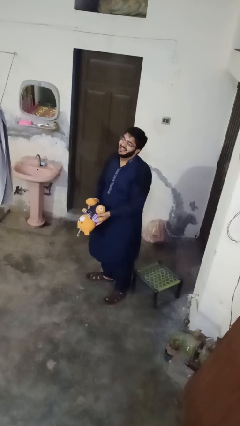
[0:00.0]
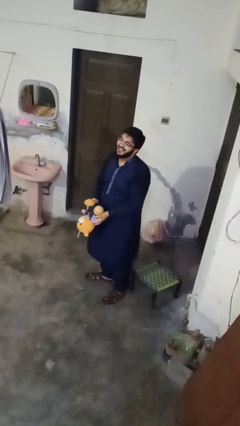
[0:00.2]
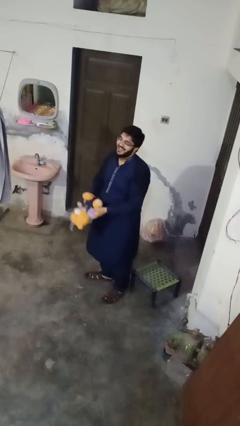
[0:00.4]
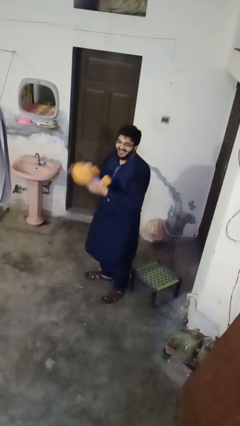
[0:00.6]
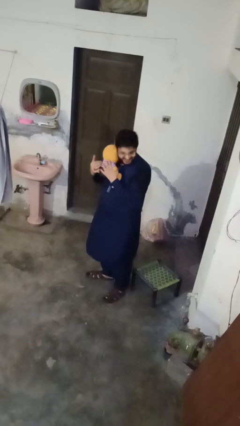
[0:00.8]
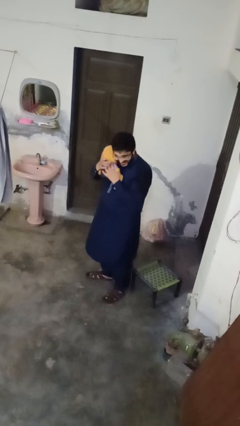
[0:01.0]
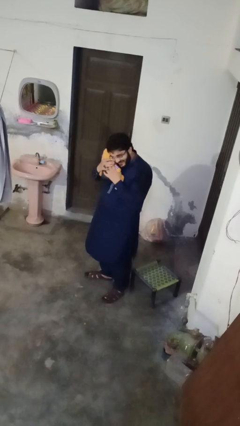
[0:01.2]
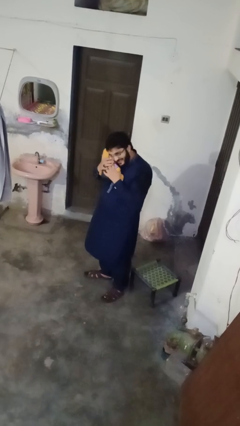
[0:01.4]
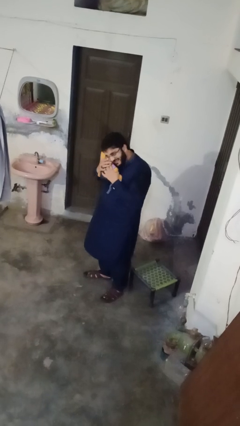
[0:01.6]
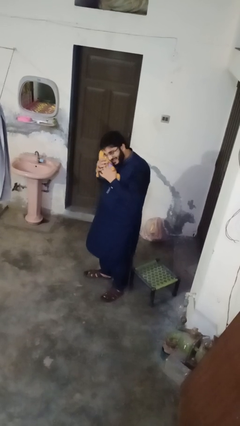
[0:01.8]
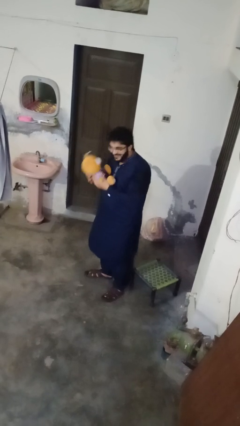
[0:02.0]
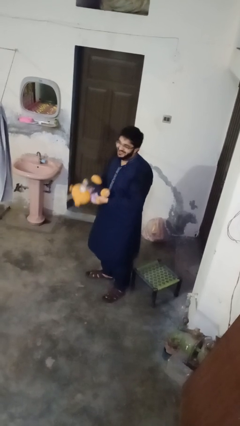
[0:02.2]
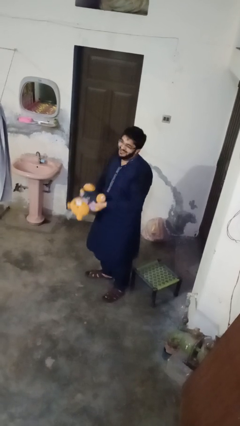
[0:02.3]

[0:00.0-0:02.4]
person hugs stuffed animal

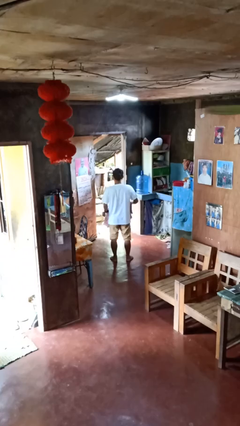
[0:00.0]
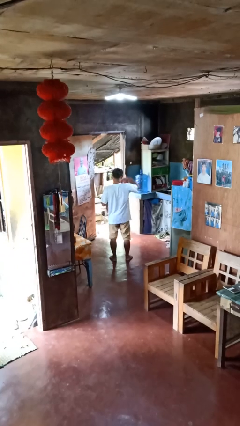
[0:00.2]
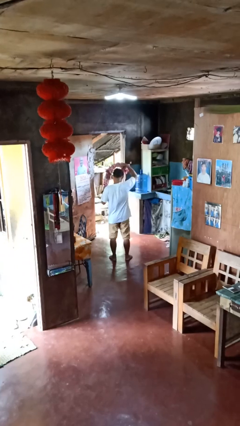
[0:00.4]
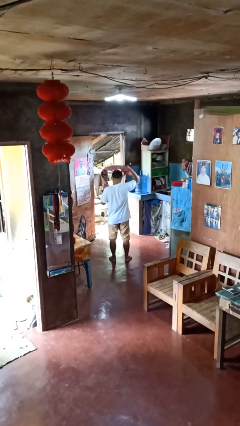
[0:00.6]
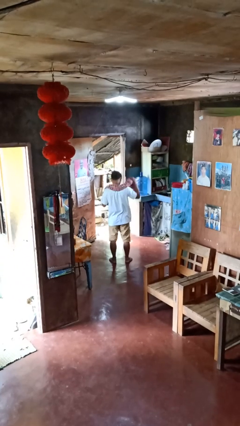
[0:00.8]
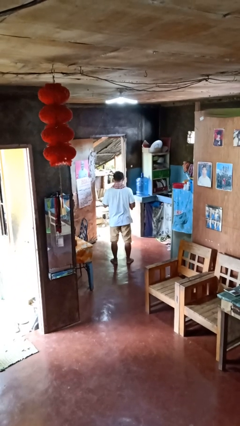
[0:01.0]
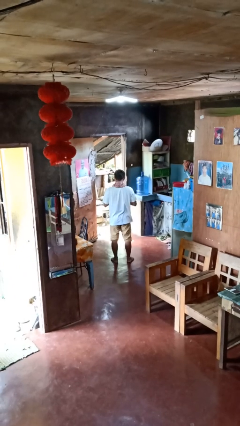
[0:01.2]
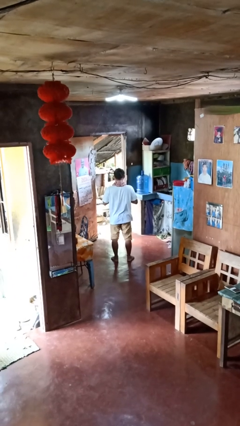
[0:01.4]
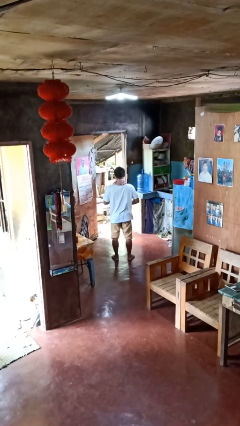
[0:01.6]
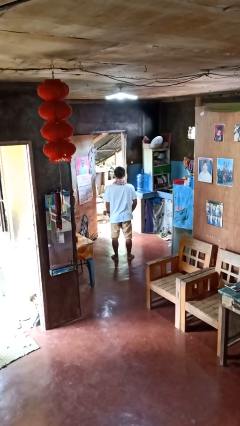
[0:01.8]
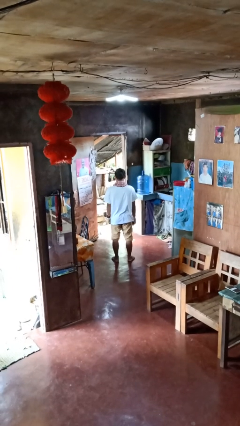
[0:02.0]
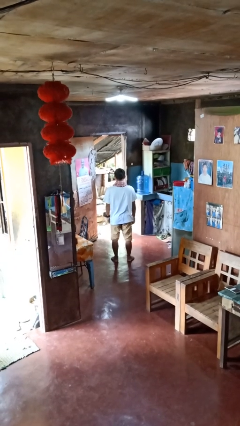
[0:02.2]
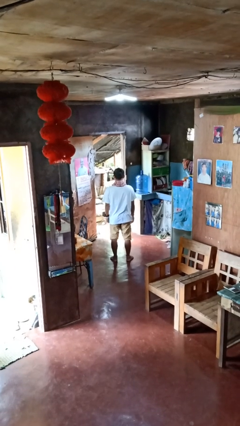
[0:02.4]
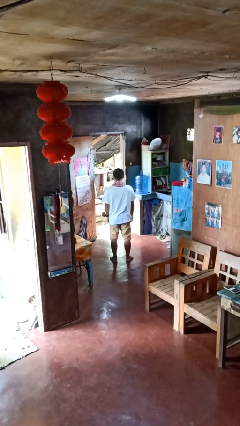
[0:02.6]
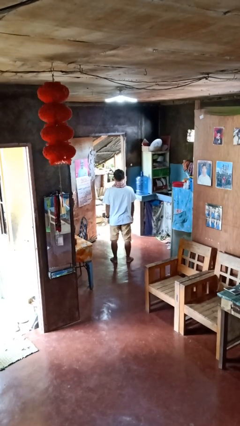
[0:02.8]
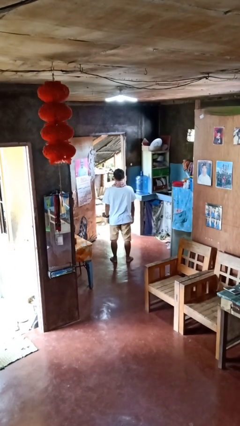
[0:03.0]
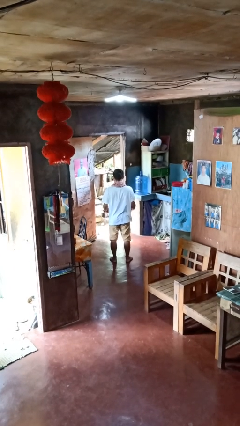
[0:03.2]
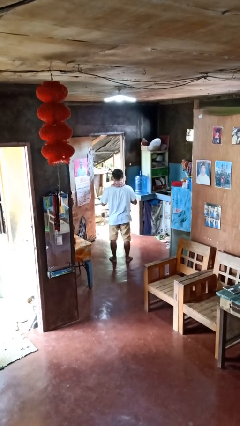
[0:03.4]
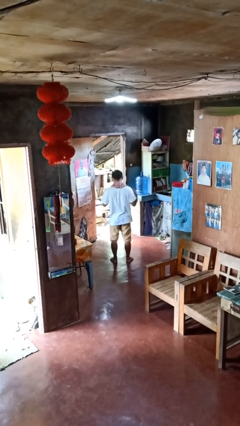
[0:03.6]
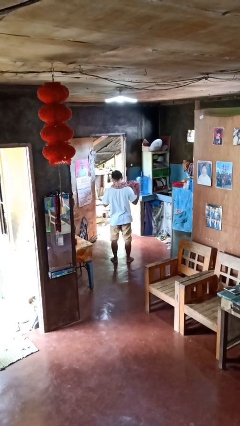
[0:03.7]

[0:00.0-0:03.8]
person puts on scarf

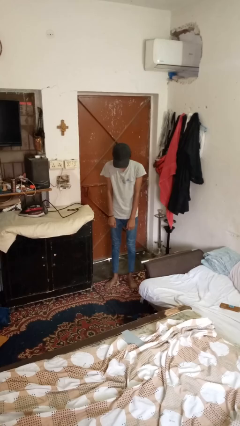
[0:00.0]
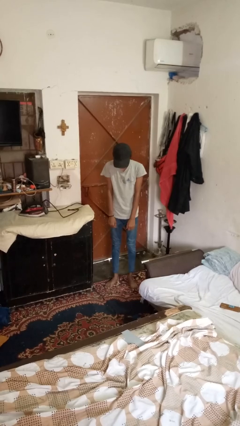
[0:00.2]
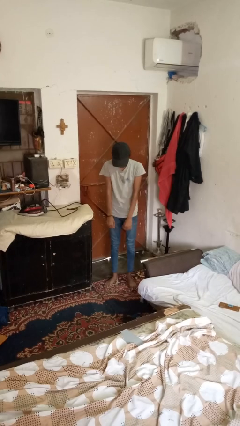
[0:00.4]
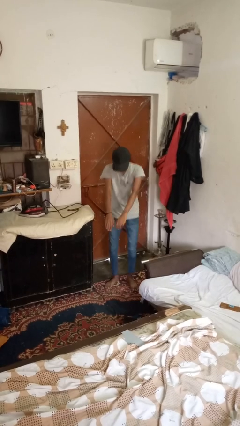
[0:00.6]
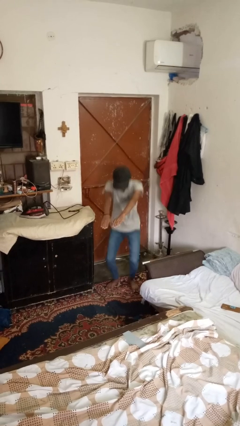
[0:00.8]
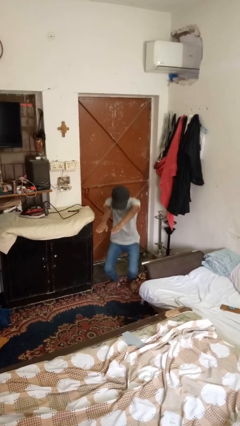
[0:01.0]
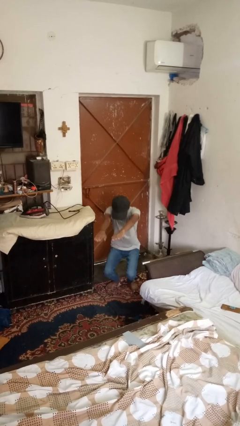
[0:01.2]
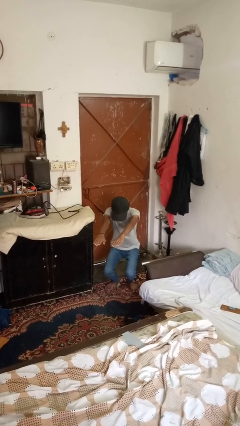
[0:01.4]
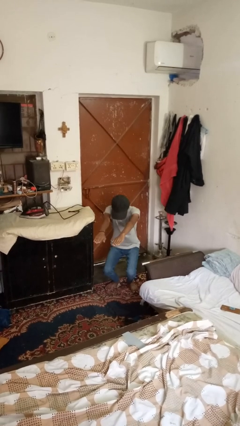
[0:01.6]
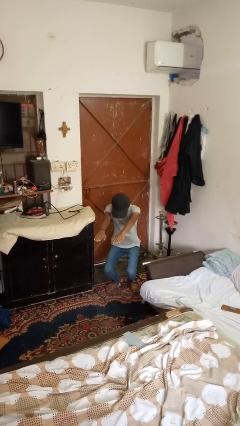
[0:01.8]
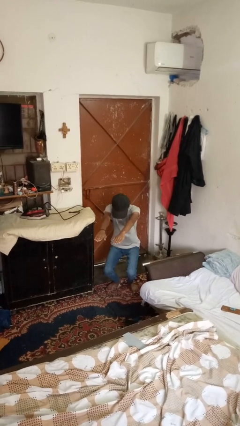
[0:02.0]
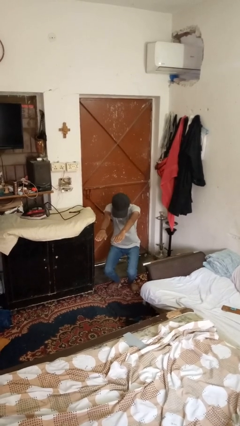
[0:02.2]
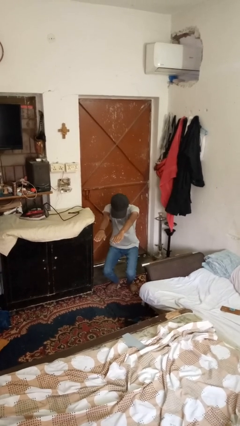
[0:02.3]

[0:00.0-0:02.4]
person squats

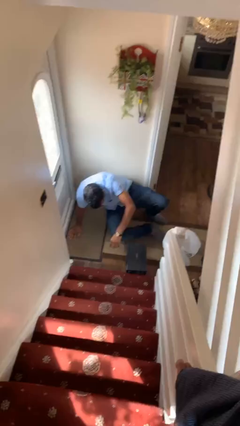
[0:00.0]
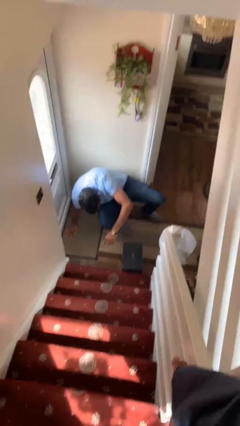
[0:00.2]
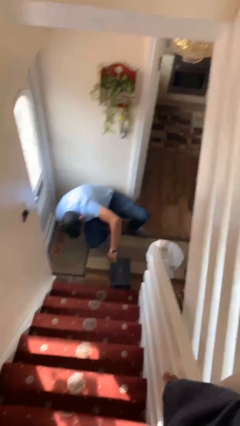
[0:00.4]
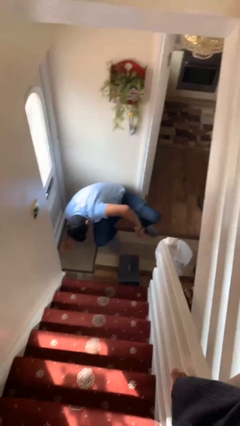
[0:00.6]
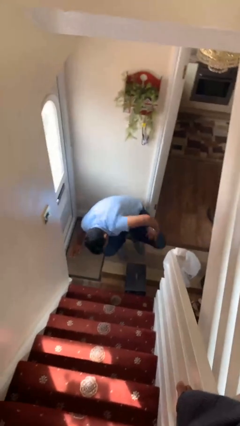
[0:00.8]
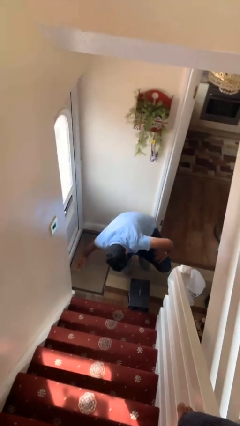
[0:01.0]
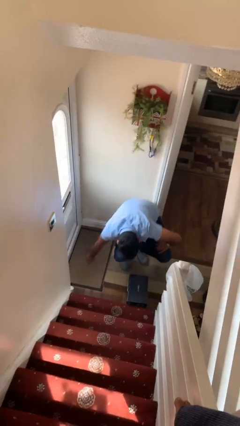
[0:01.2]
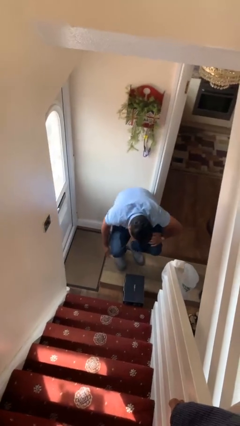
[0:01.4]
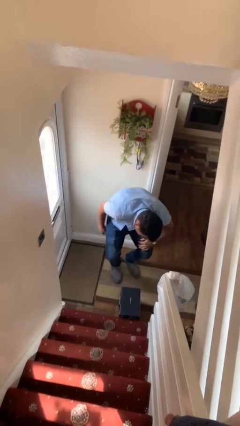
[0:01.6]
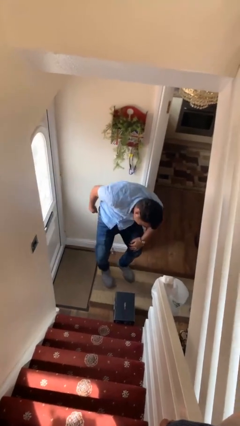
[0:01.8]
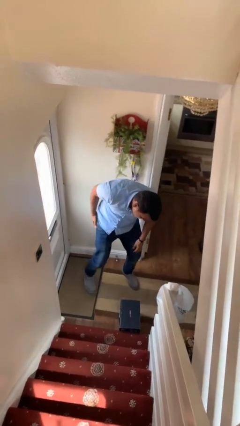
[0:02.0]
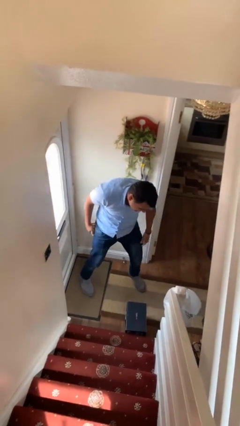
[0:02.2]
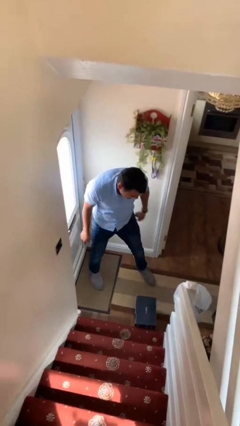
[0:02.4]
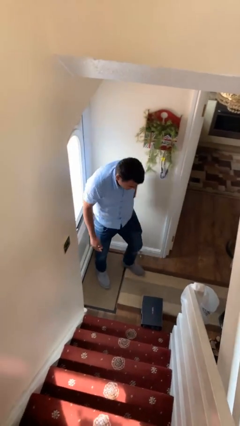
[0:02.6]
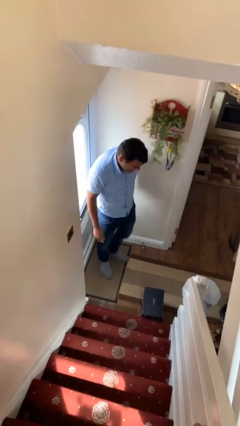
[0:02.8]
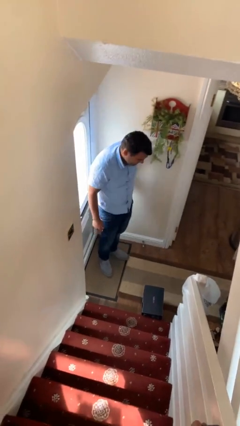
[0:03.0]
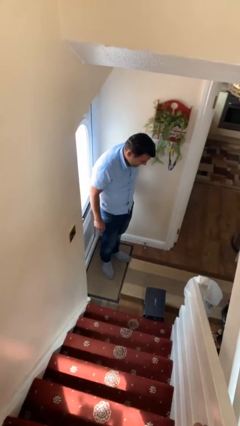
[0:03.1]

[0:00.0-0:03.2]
person stands up from floor

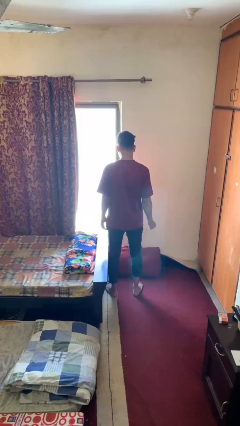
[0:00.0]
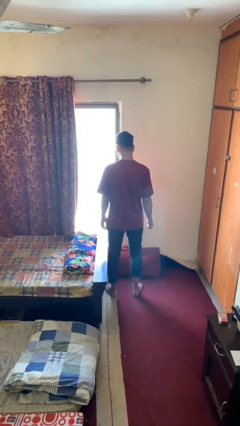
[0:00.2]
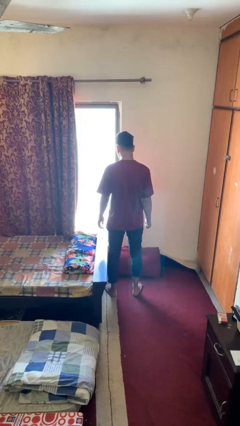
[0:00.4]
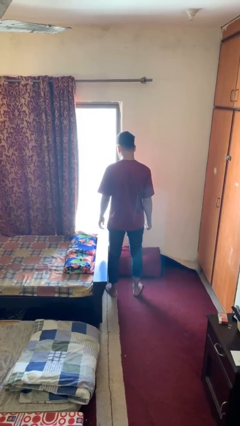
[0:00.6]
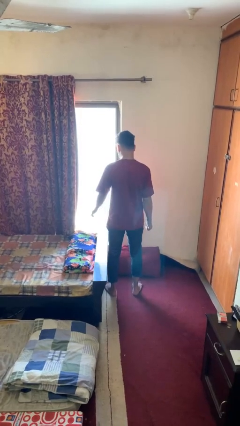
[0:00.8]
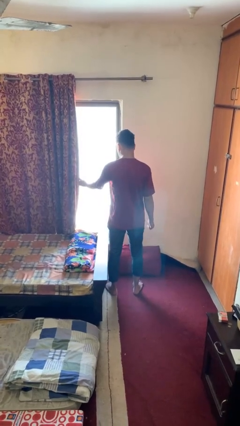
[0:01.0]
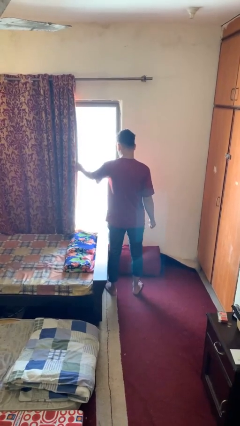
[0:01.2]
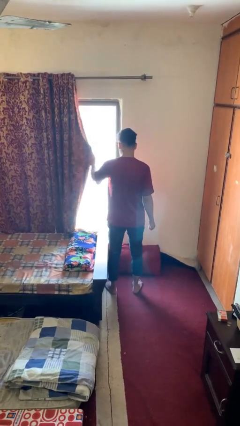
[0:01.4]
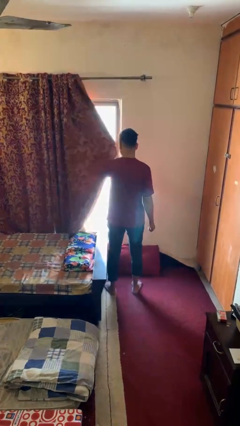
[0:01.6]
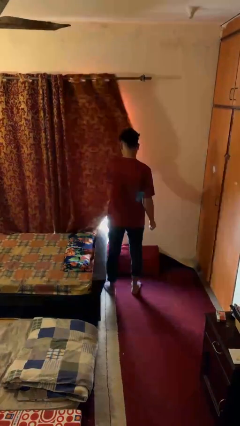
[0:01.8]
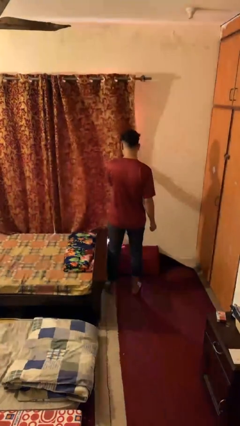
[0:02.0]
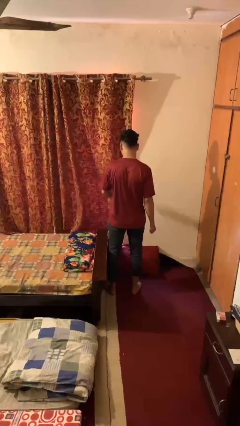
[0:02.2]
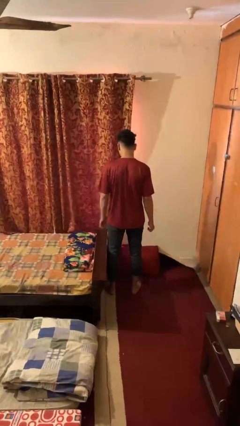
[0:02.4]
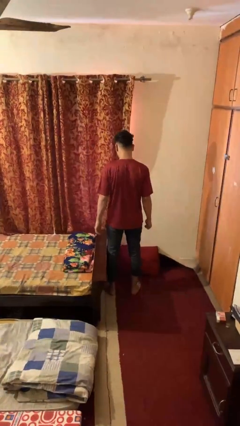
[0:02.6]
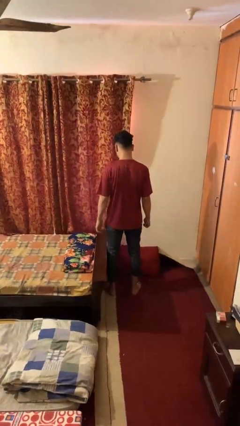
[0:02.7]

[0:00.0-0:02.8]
person closes curtains

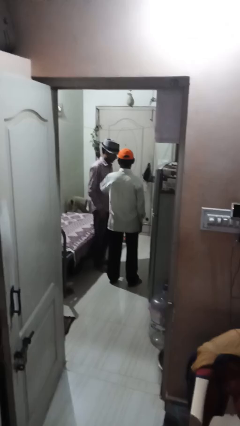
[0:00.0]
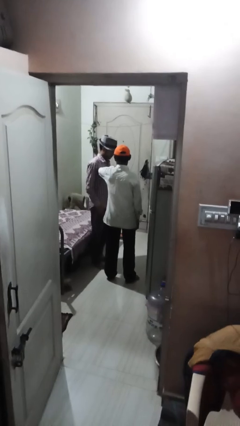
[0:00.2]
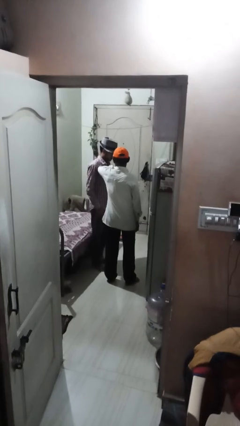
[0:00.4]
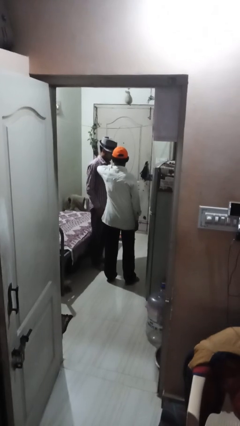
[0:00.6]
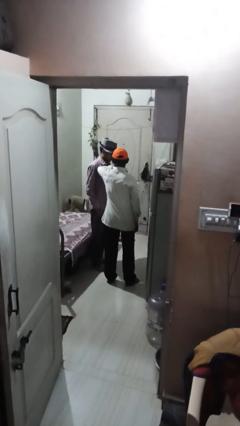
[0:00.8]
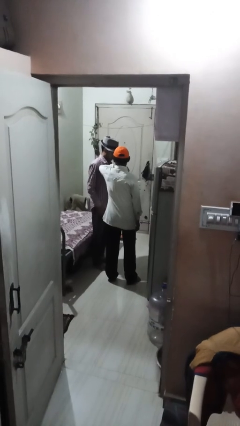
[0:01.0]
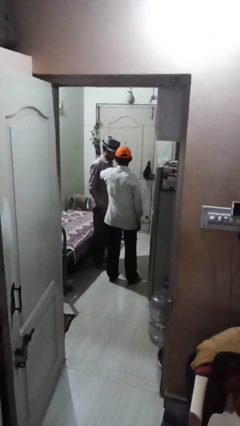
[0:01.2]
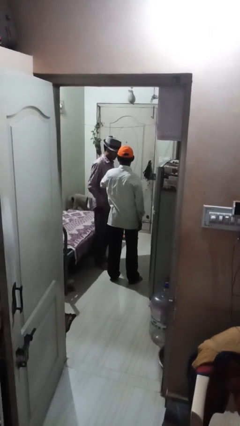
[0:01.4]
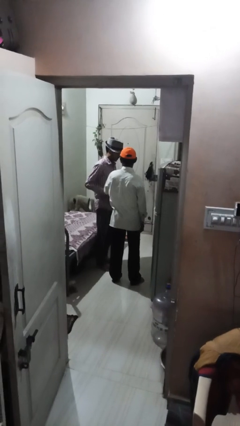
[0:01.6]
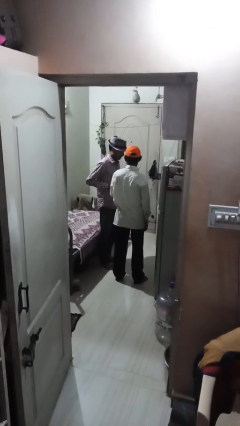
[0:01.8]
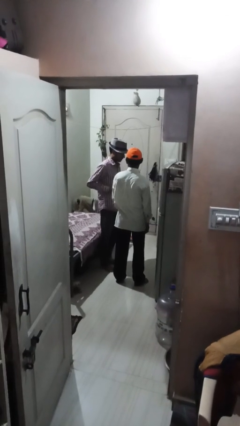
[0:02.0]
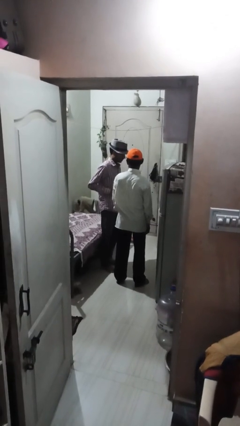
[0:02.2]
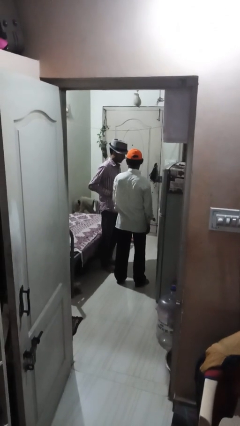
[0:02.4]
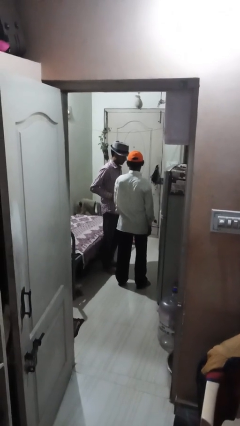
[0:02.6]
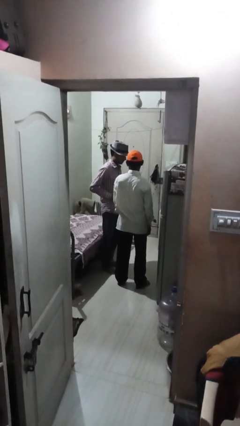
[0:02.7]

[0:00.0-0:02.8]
person nudges person with elbow

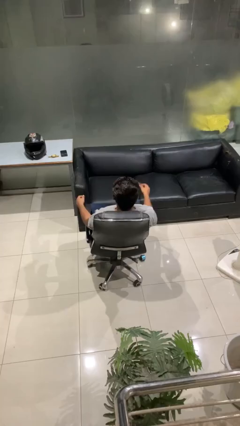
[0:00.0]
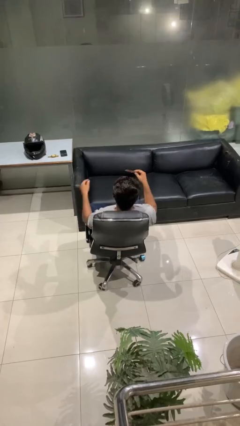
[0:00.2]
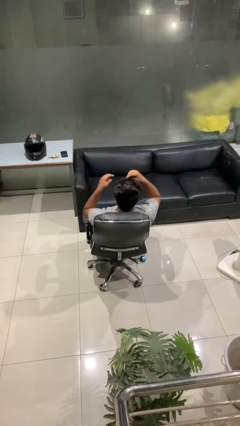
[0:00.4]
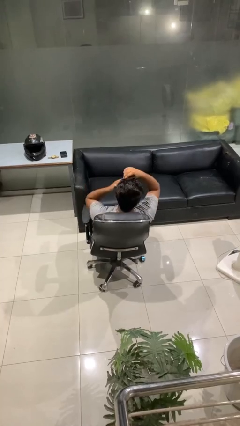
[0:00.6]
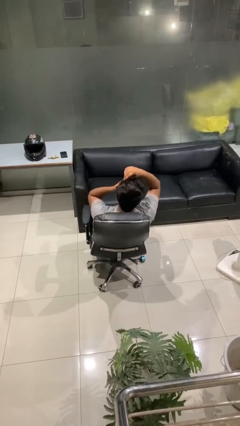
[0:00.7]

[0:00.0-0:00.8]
person brushes hair
